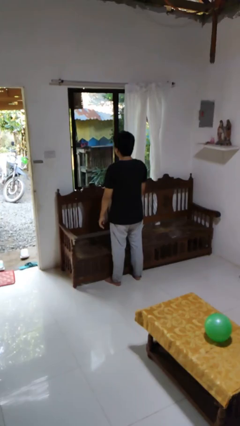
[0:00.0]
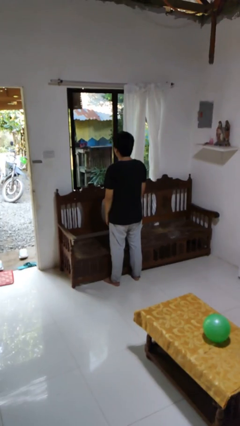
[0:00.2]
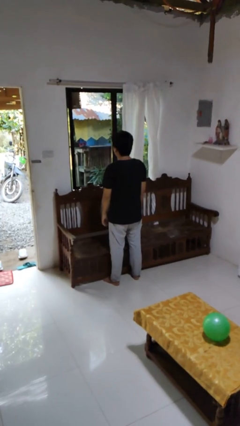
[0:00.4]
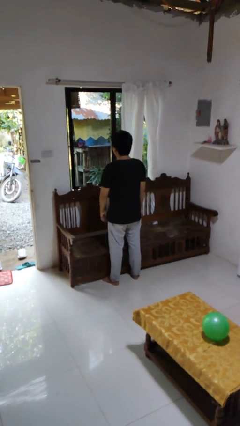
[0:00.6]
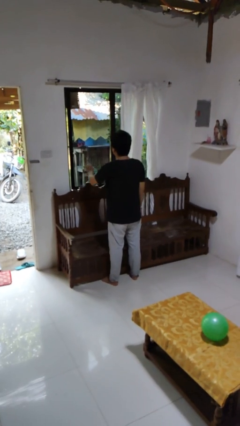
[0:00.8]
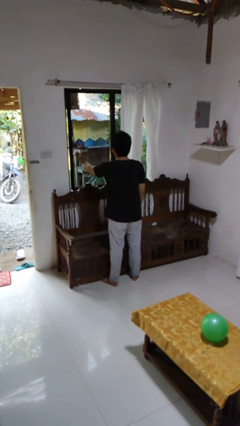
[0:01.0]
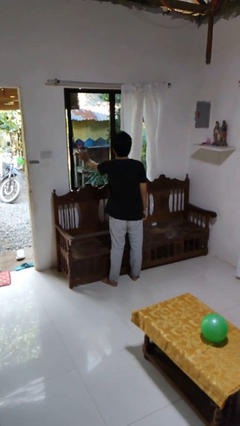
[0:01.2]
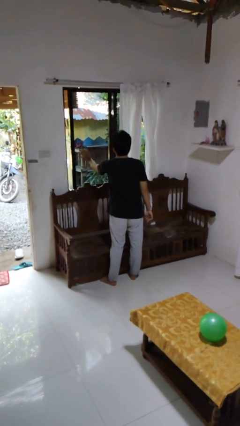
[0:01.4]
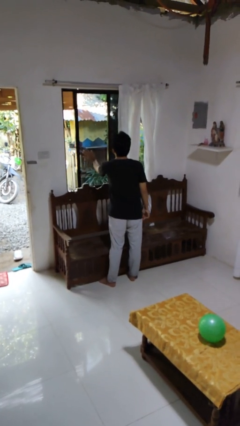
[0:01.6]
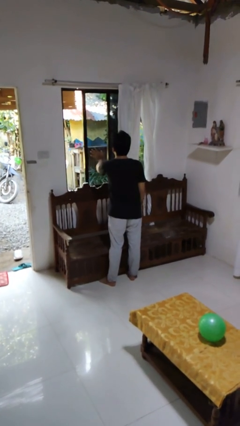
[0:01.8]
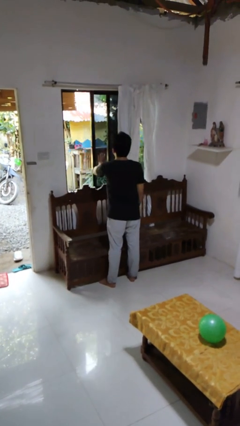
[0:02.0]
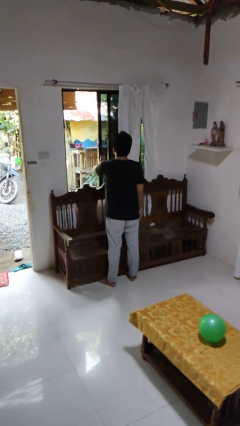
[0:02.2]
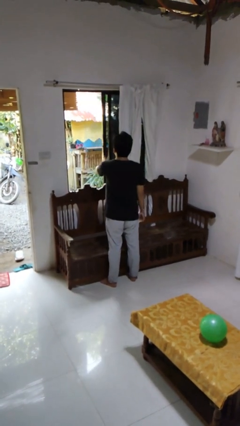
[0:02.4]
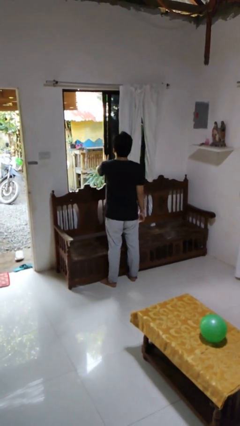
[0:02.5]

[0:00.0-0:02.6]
person opens home window

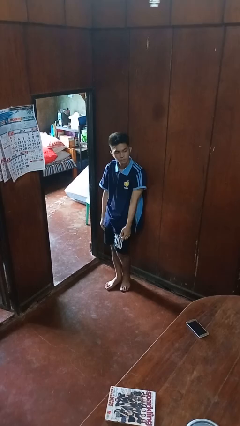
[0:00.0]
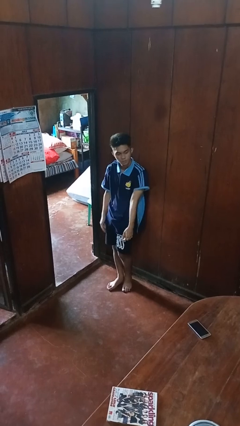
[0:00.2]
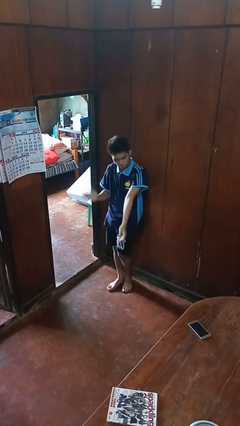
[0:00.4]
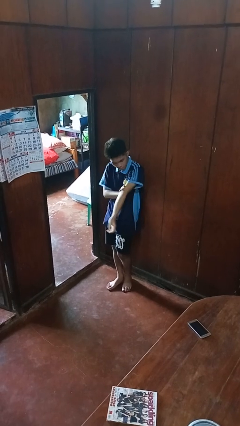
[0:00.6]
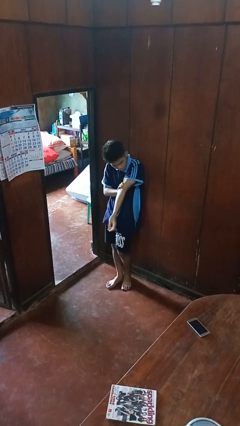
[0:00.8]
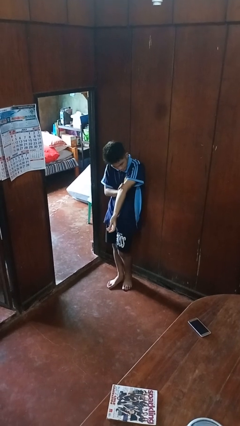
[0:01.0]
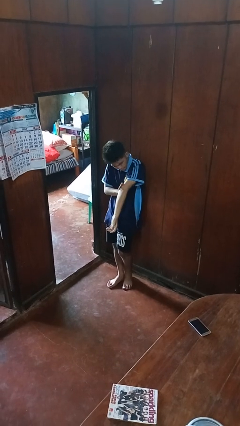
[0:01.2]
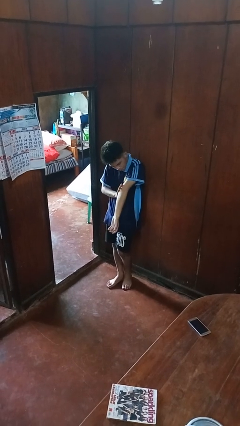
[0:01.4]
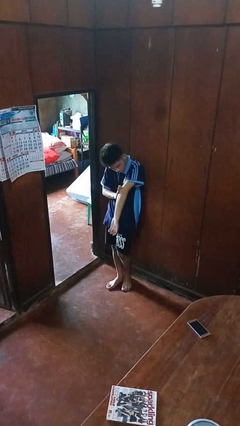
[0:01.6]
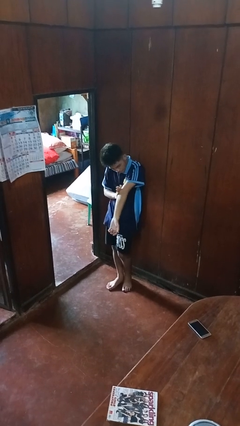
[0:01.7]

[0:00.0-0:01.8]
person swats bug

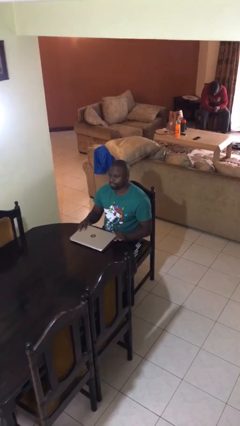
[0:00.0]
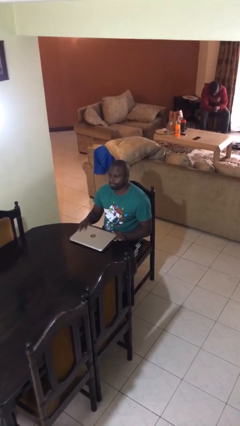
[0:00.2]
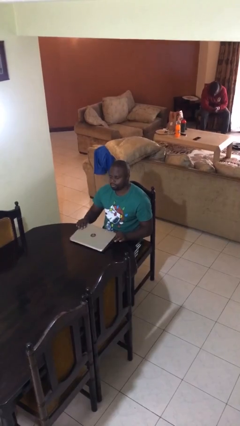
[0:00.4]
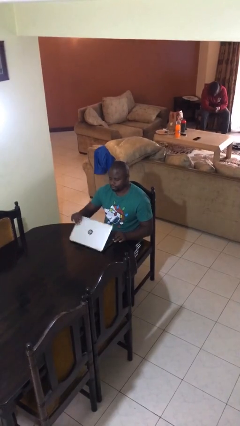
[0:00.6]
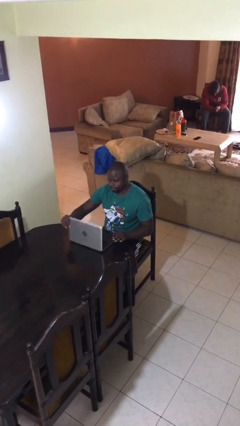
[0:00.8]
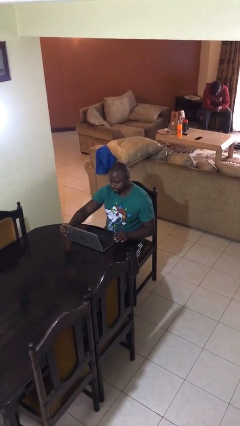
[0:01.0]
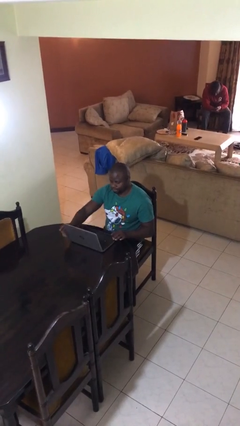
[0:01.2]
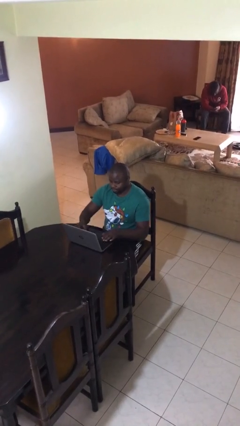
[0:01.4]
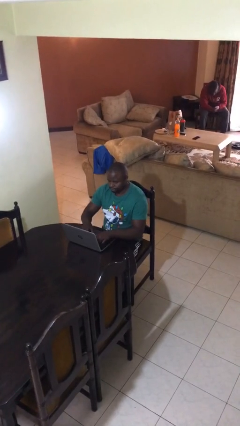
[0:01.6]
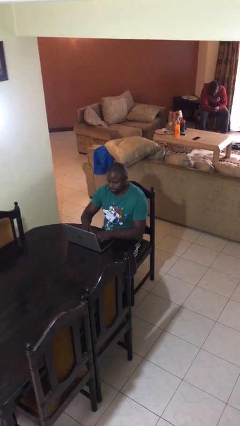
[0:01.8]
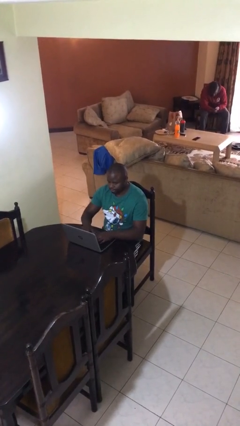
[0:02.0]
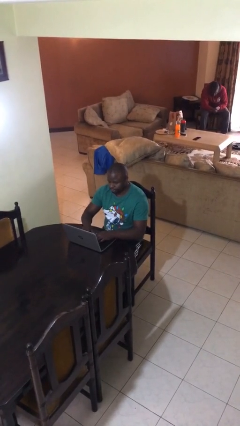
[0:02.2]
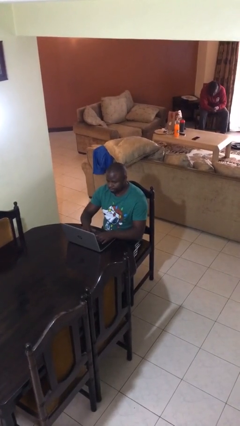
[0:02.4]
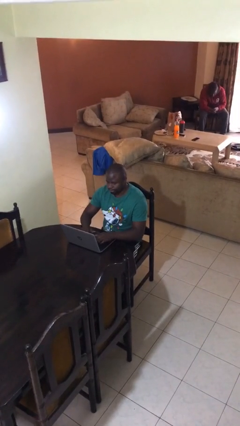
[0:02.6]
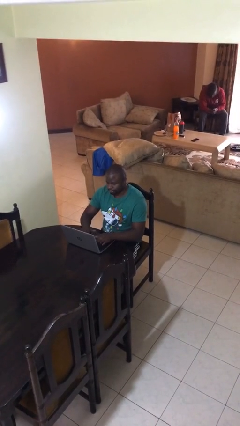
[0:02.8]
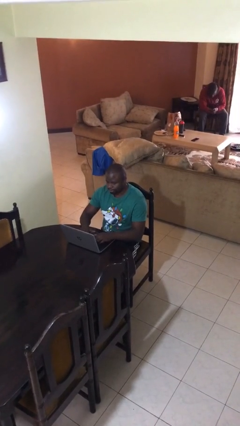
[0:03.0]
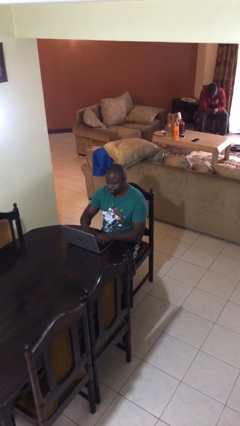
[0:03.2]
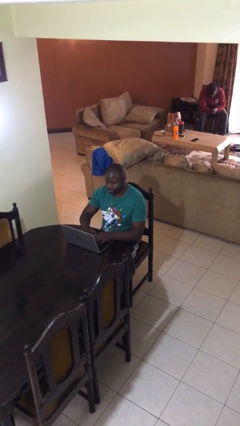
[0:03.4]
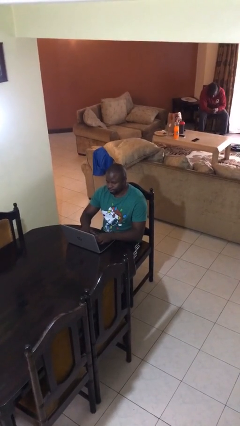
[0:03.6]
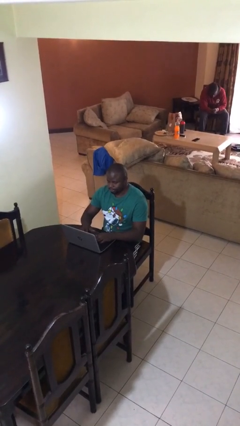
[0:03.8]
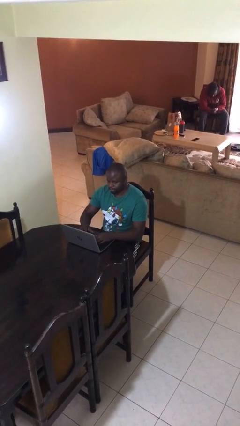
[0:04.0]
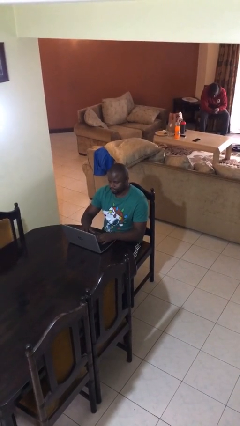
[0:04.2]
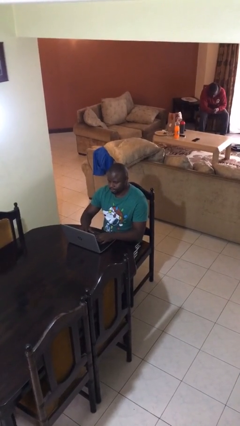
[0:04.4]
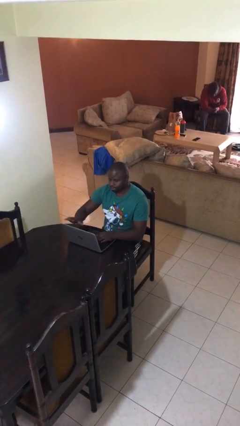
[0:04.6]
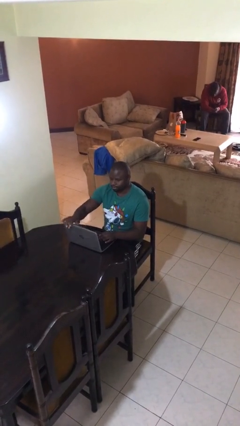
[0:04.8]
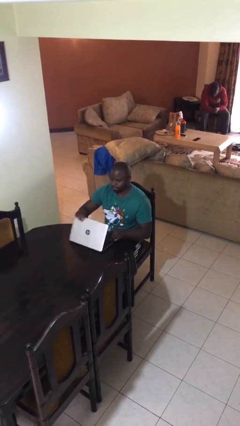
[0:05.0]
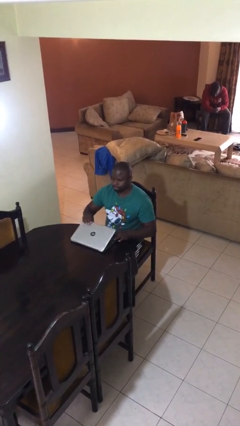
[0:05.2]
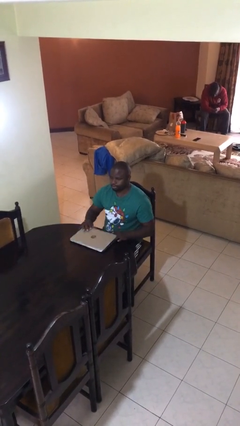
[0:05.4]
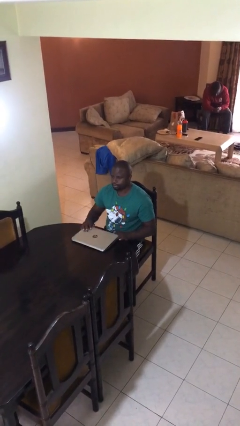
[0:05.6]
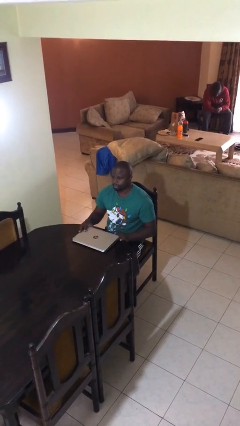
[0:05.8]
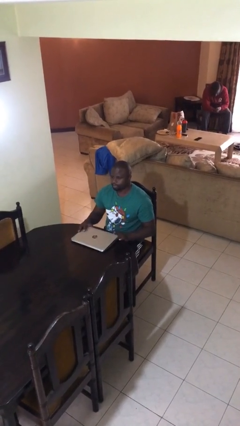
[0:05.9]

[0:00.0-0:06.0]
person interacts with laptop

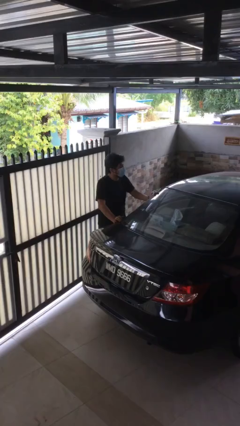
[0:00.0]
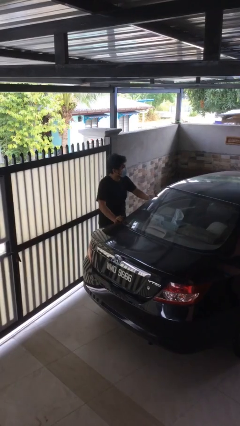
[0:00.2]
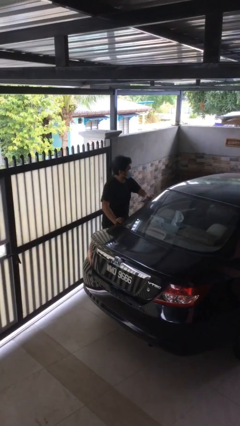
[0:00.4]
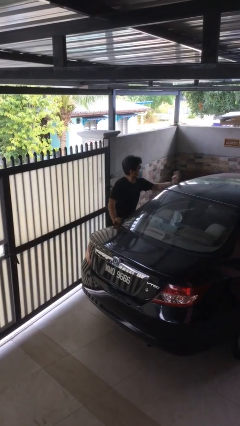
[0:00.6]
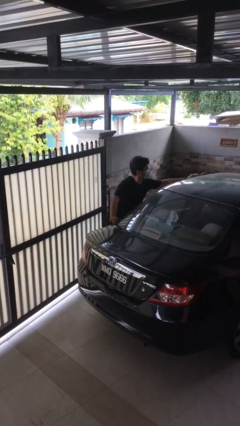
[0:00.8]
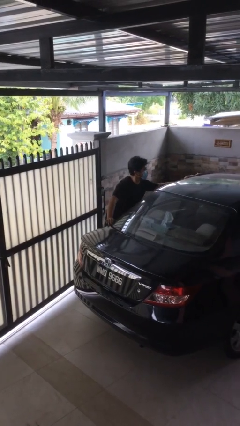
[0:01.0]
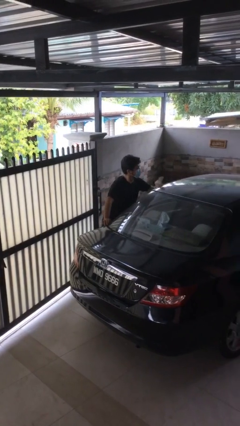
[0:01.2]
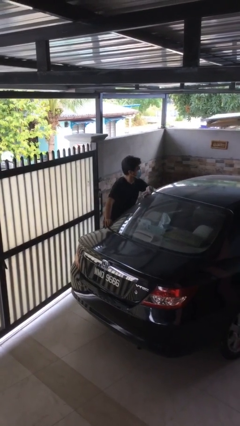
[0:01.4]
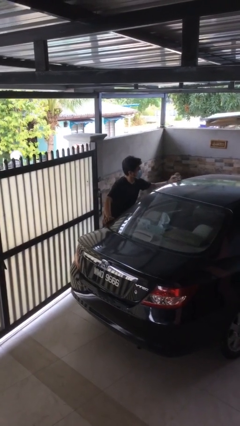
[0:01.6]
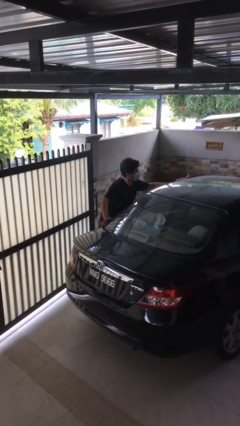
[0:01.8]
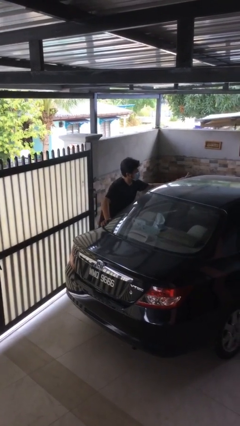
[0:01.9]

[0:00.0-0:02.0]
person polishes car with rag

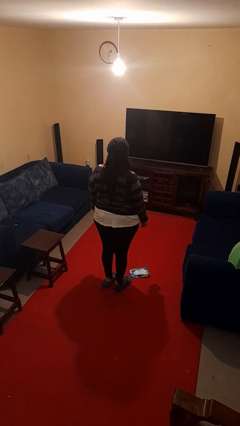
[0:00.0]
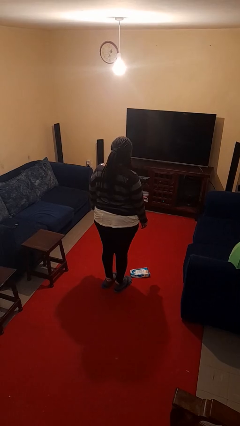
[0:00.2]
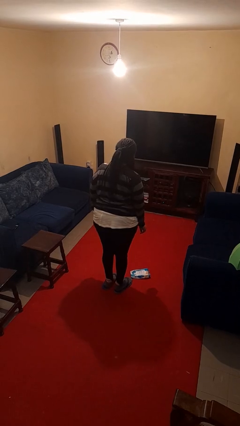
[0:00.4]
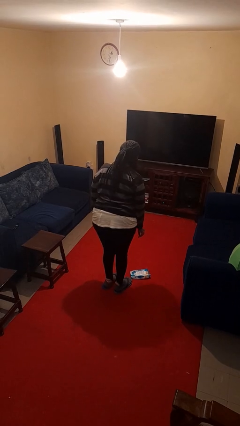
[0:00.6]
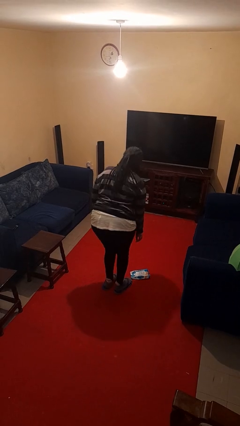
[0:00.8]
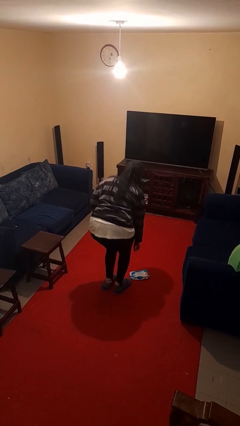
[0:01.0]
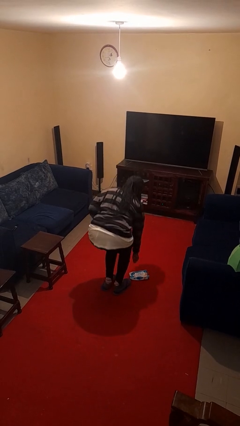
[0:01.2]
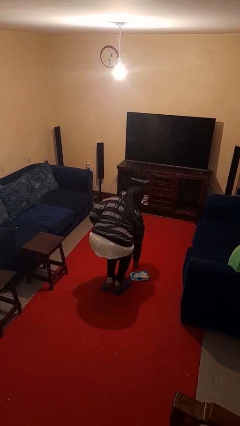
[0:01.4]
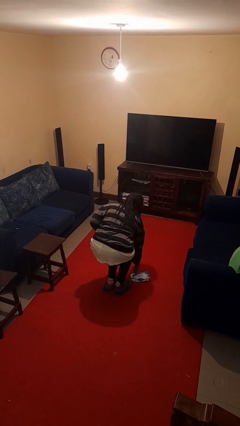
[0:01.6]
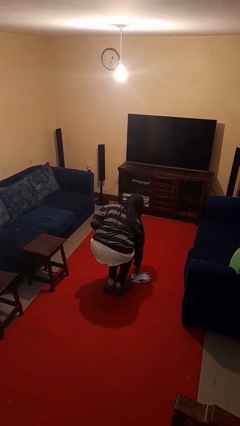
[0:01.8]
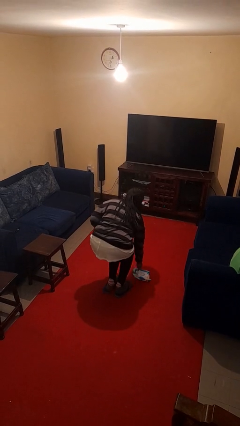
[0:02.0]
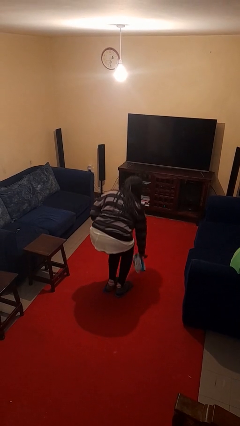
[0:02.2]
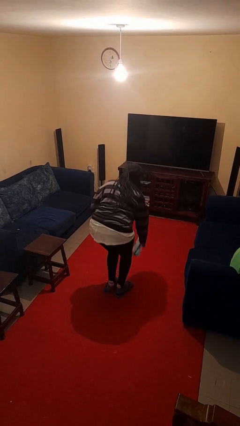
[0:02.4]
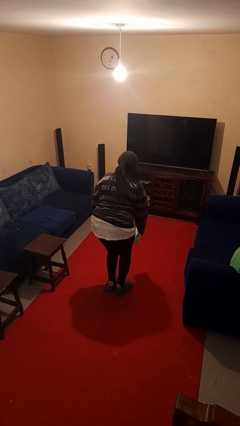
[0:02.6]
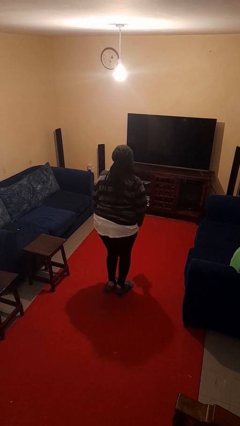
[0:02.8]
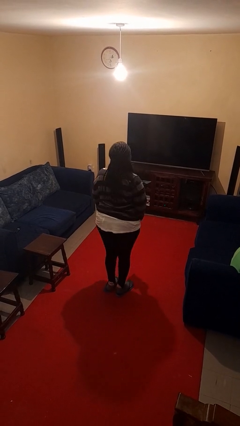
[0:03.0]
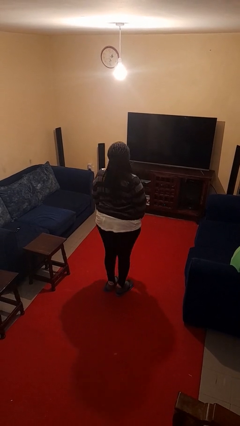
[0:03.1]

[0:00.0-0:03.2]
person picks up object from floor

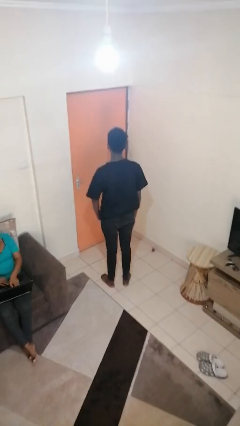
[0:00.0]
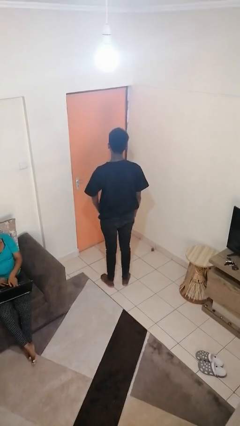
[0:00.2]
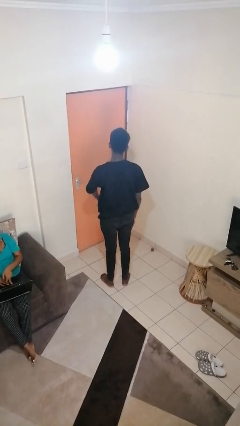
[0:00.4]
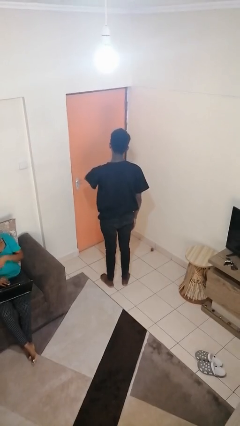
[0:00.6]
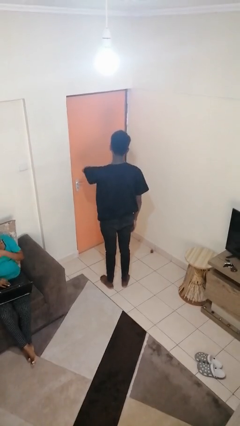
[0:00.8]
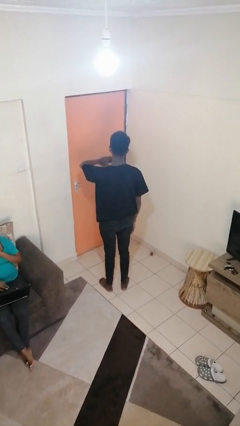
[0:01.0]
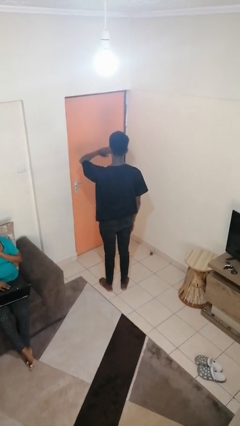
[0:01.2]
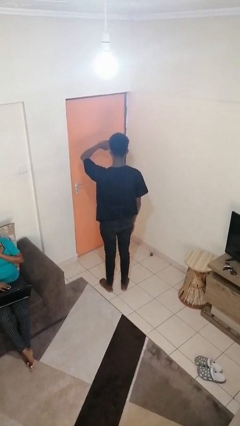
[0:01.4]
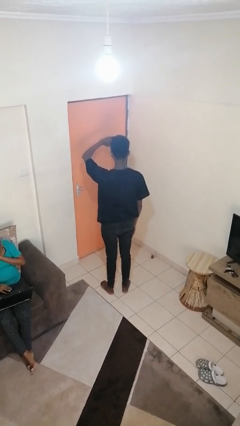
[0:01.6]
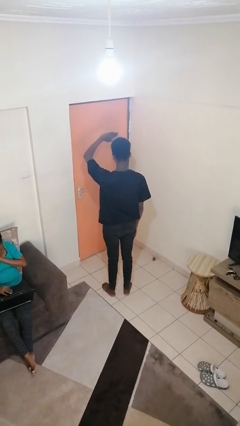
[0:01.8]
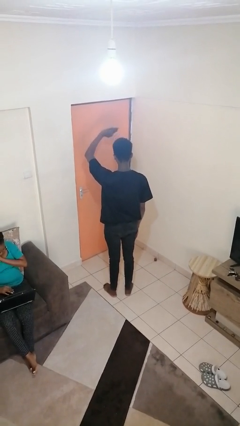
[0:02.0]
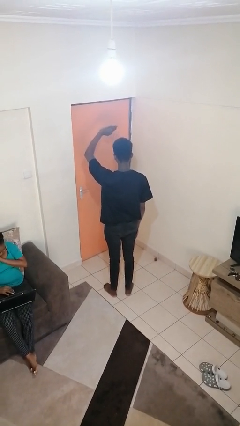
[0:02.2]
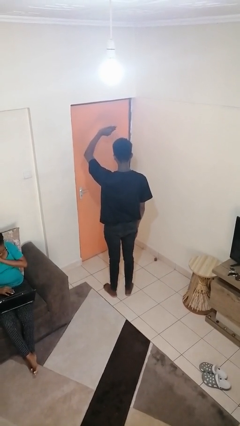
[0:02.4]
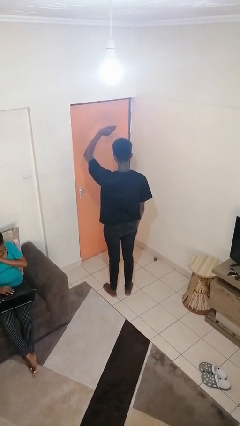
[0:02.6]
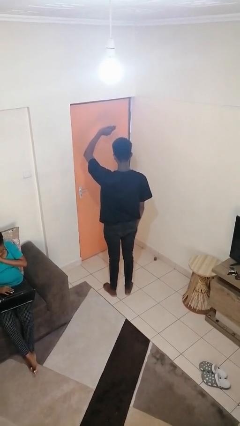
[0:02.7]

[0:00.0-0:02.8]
person gestures swipe up
